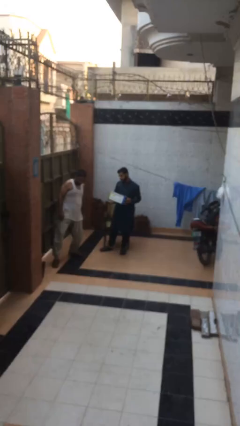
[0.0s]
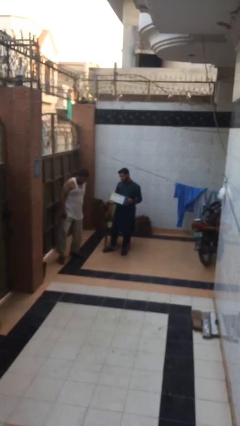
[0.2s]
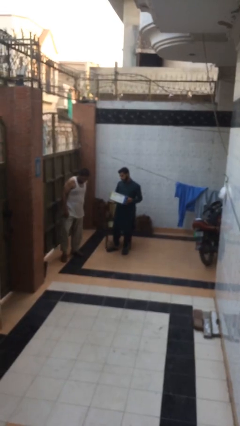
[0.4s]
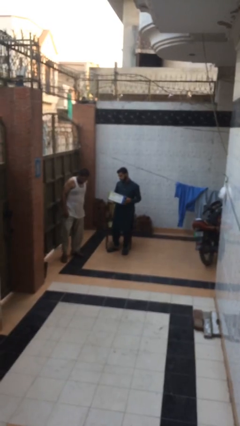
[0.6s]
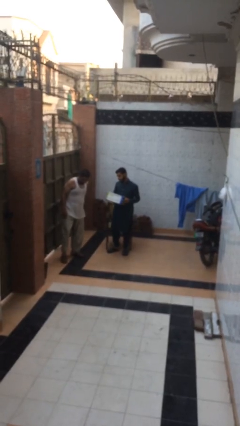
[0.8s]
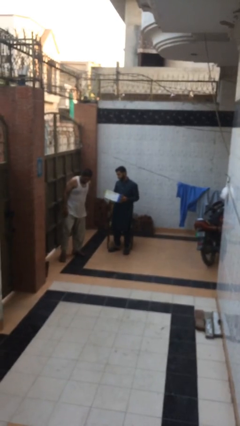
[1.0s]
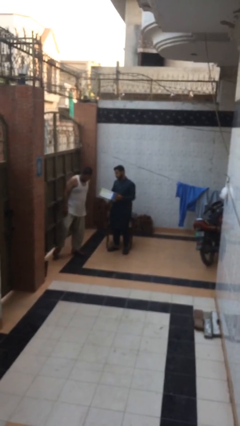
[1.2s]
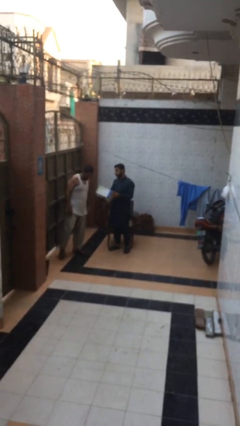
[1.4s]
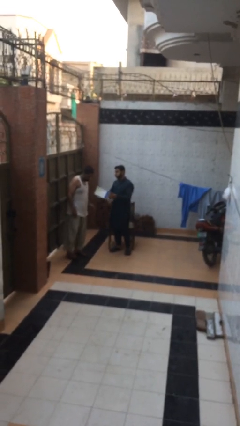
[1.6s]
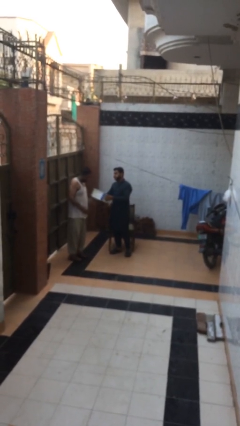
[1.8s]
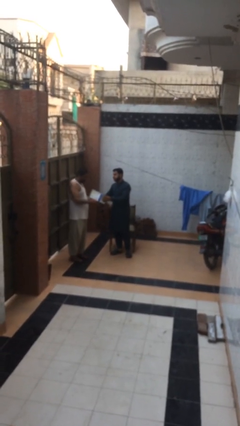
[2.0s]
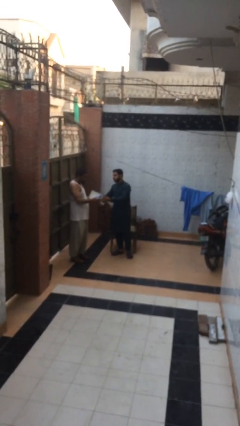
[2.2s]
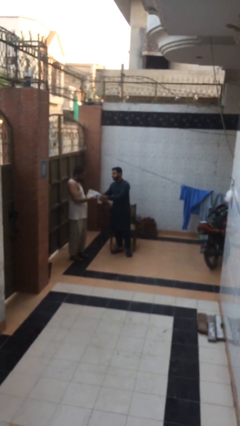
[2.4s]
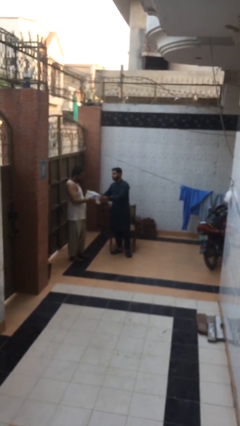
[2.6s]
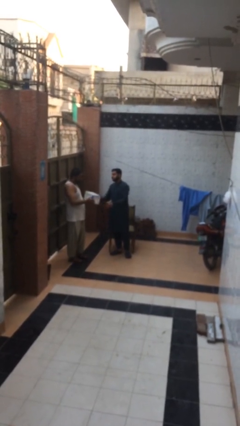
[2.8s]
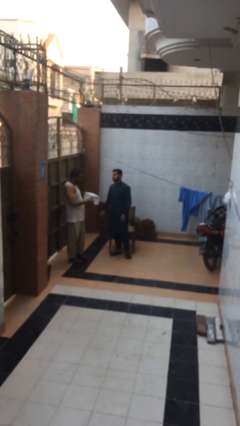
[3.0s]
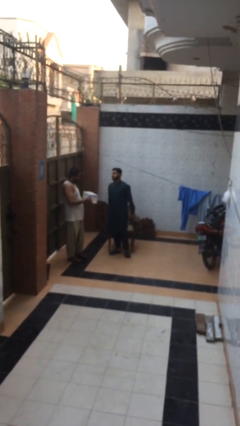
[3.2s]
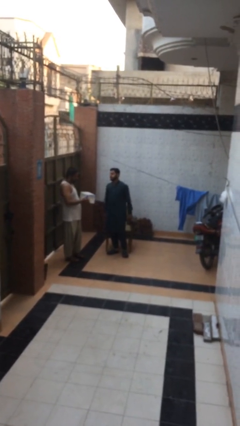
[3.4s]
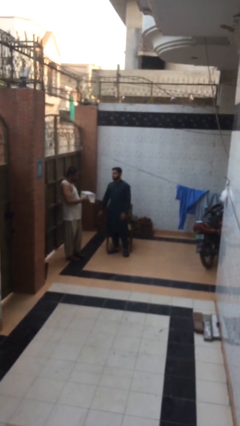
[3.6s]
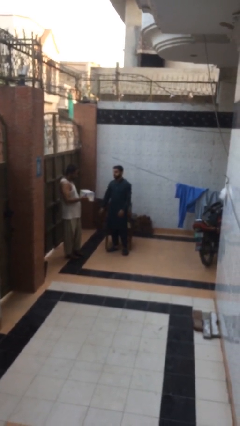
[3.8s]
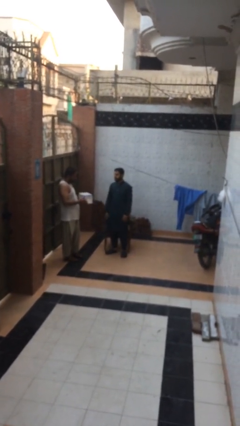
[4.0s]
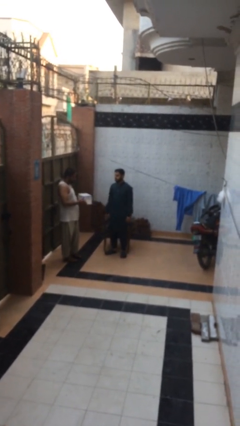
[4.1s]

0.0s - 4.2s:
person transfers object to person

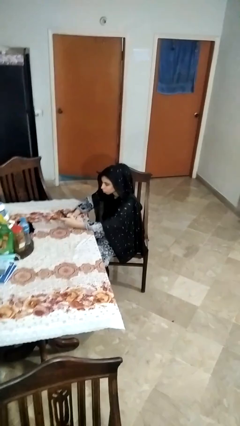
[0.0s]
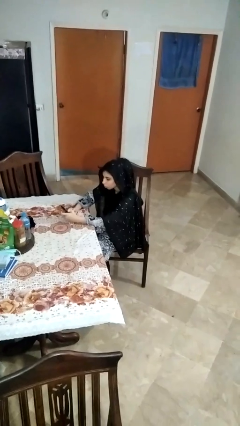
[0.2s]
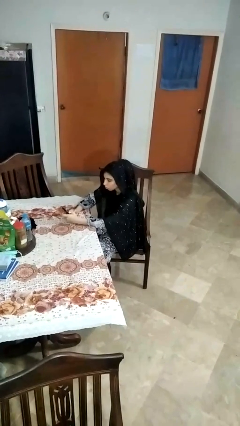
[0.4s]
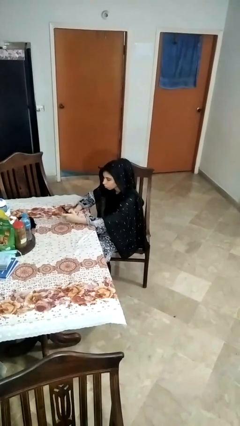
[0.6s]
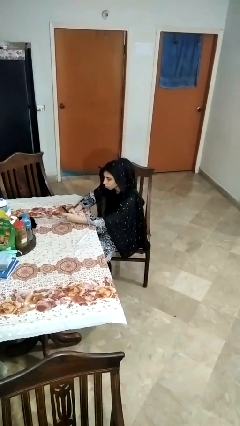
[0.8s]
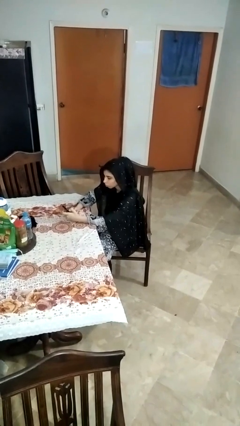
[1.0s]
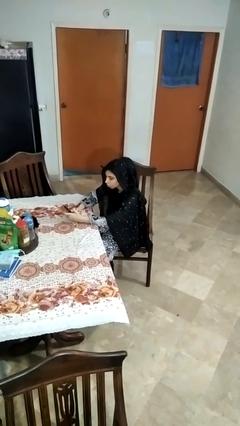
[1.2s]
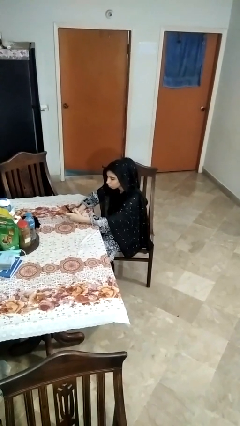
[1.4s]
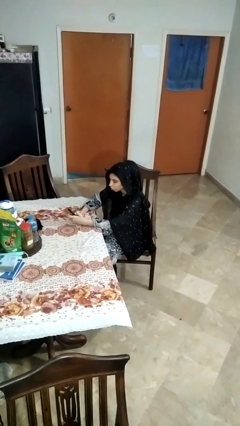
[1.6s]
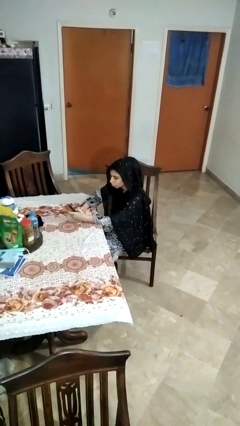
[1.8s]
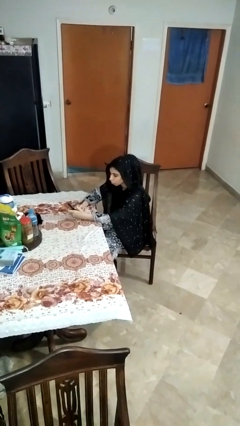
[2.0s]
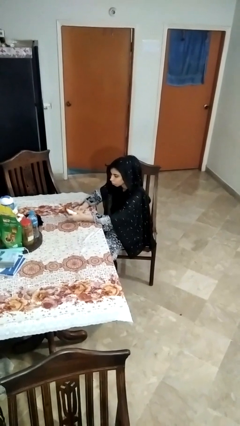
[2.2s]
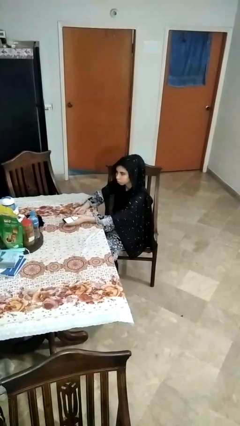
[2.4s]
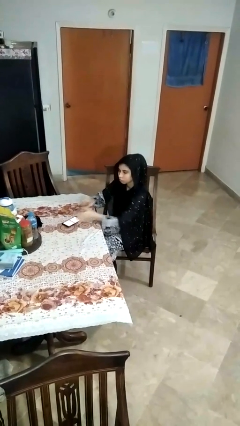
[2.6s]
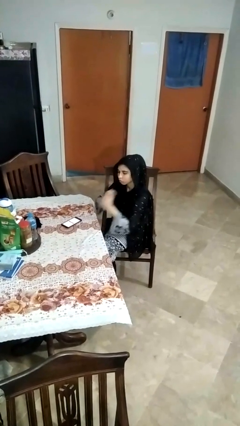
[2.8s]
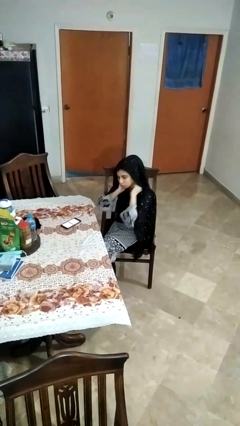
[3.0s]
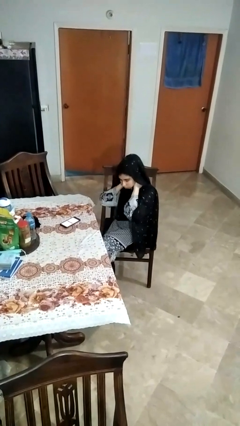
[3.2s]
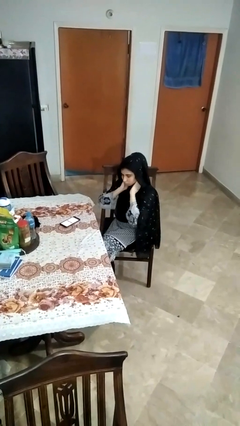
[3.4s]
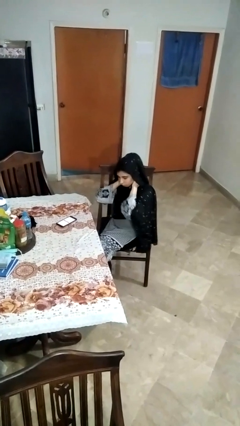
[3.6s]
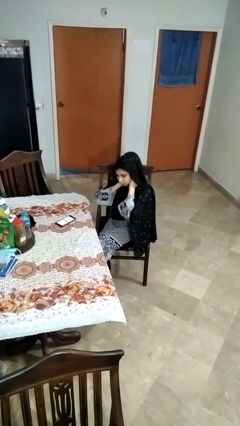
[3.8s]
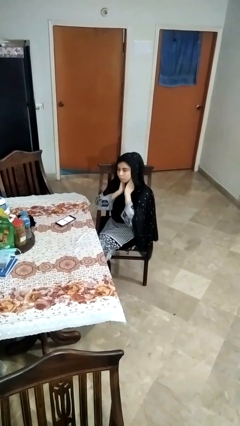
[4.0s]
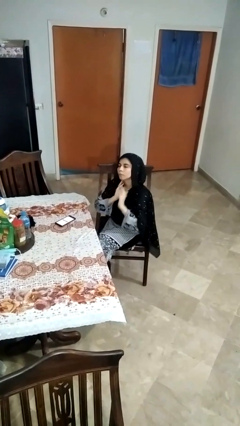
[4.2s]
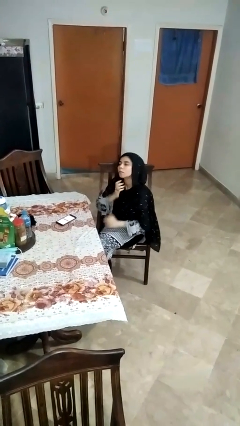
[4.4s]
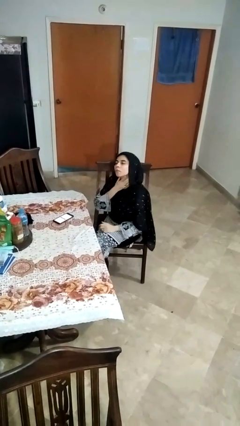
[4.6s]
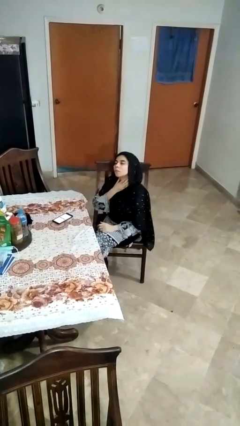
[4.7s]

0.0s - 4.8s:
person rubs neck

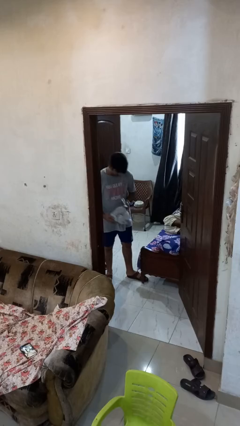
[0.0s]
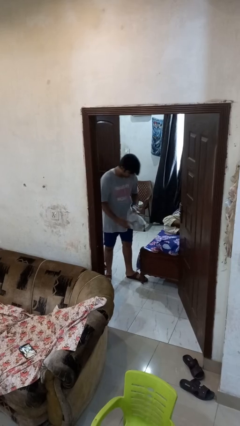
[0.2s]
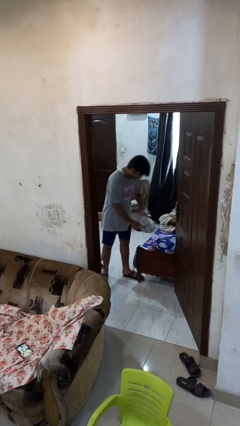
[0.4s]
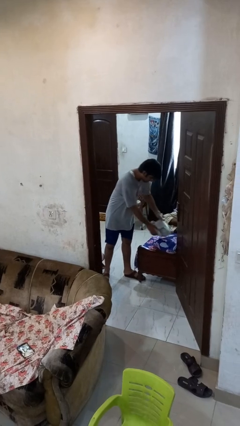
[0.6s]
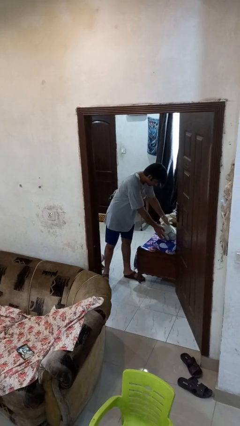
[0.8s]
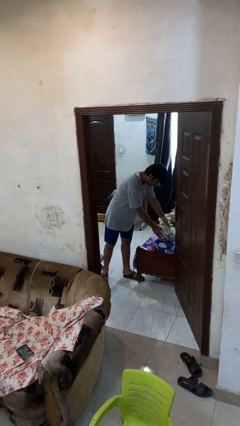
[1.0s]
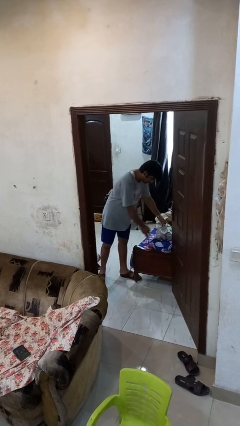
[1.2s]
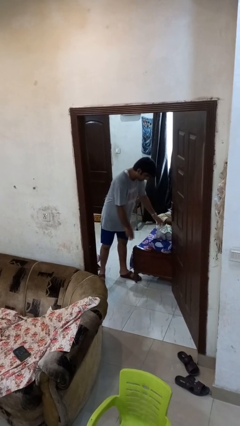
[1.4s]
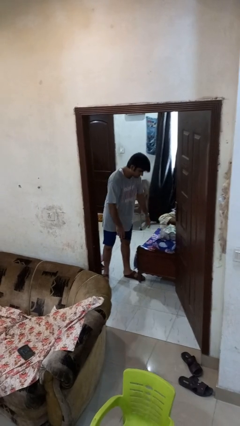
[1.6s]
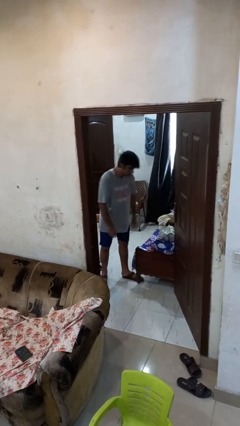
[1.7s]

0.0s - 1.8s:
person puts down object on bed

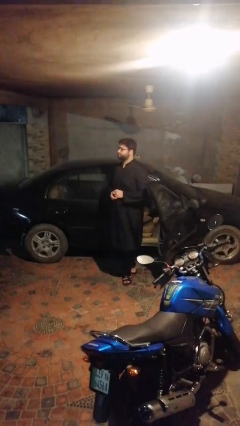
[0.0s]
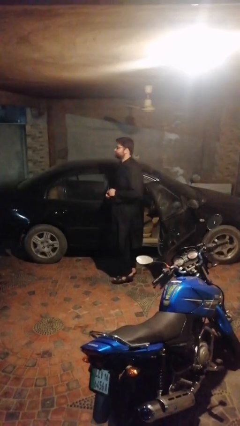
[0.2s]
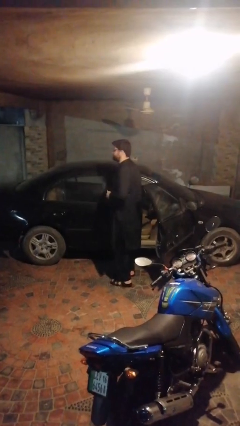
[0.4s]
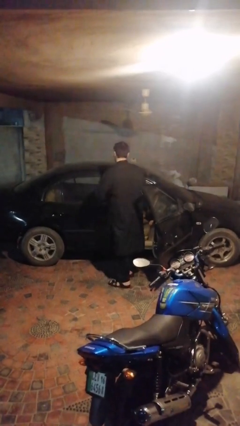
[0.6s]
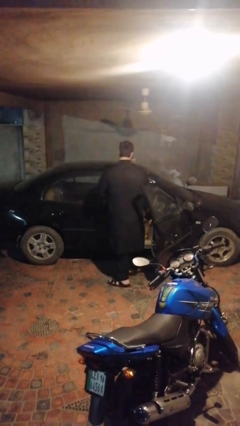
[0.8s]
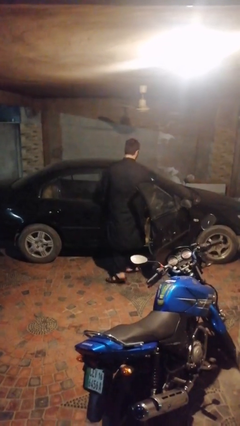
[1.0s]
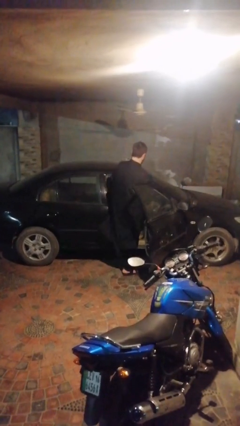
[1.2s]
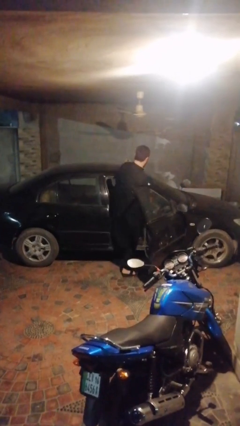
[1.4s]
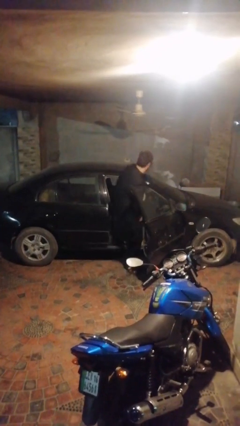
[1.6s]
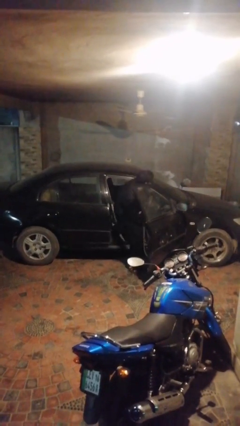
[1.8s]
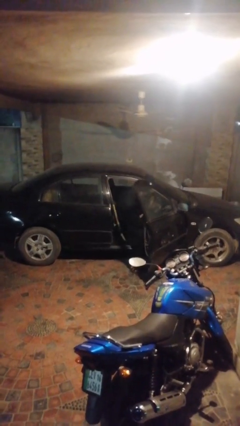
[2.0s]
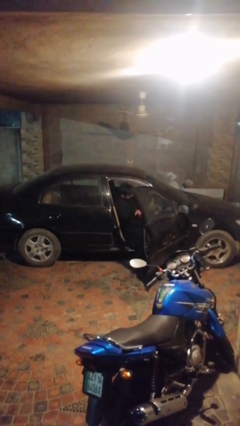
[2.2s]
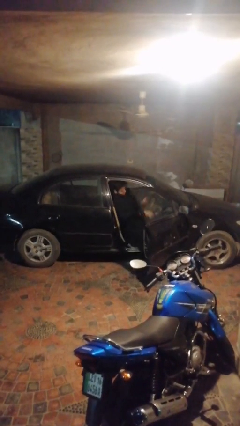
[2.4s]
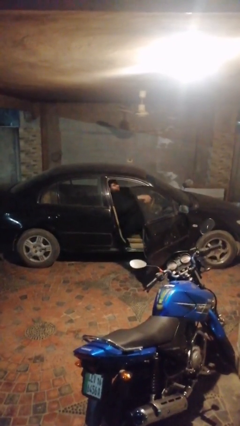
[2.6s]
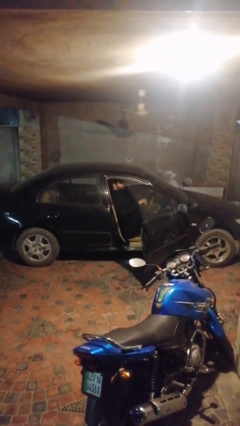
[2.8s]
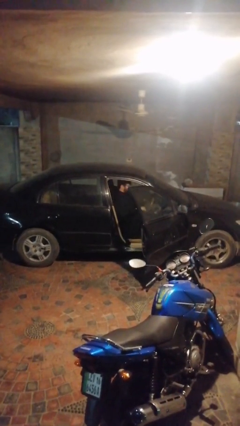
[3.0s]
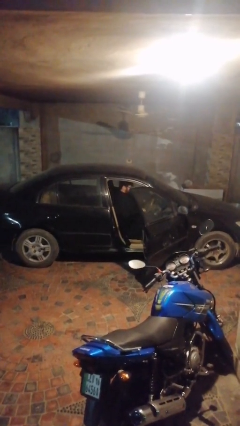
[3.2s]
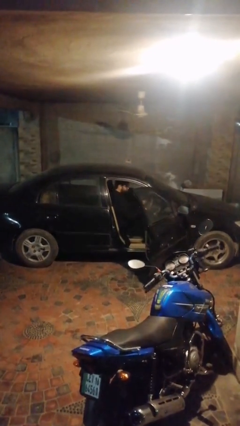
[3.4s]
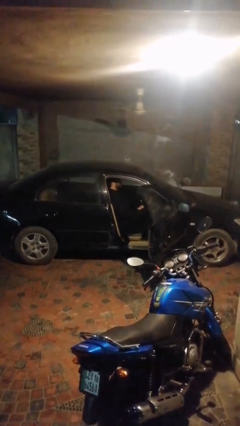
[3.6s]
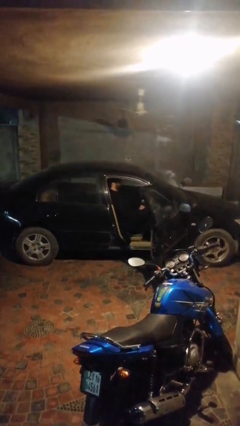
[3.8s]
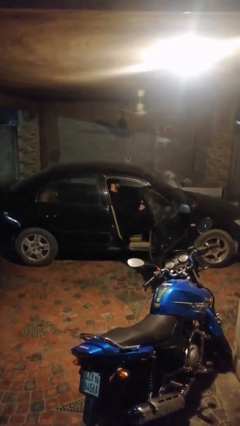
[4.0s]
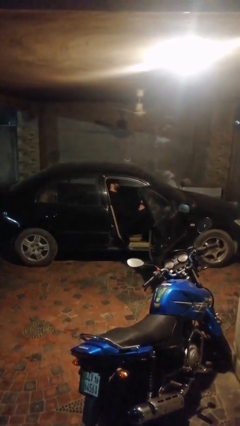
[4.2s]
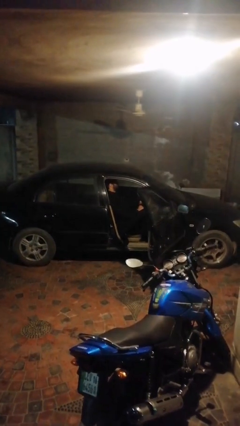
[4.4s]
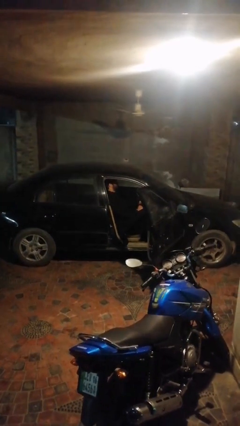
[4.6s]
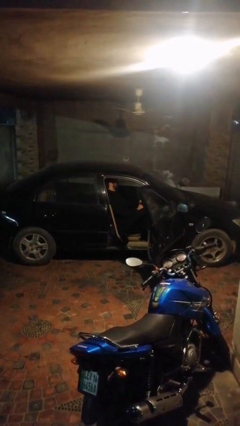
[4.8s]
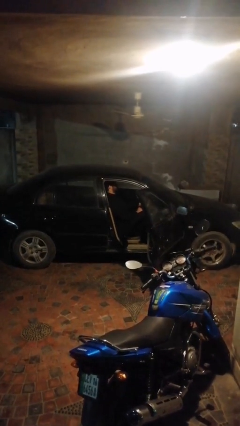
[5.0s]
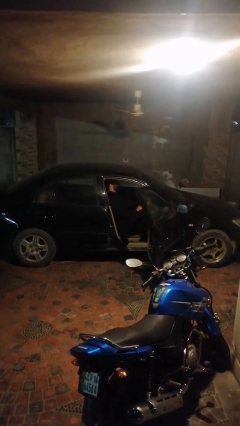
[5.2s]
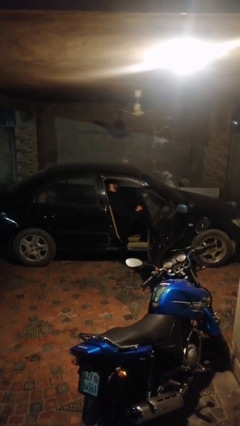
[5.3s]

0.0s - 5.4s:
person enters car

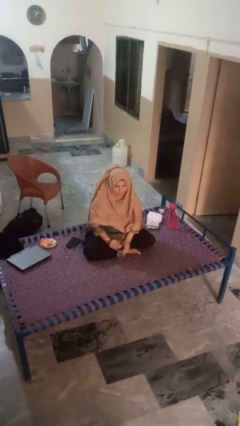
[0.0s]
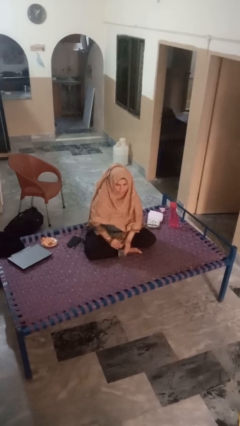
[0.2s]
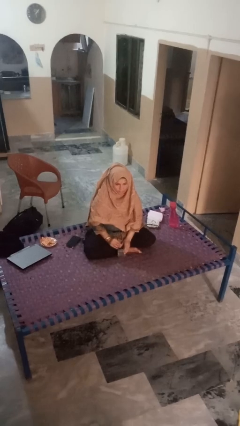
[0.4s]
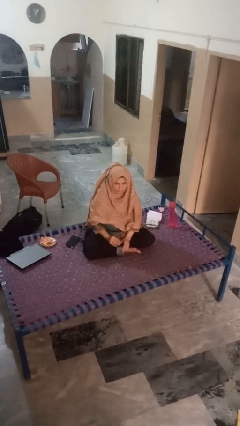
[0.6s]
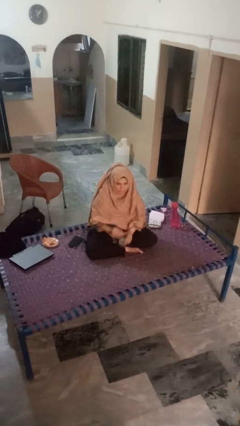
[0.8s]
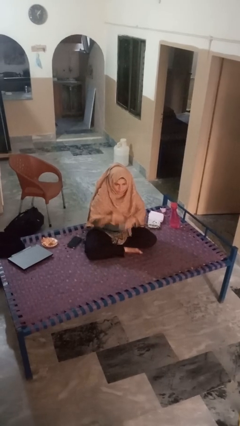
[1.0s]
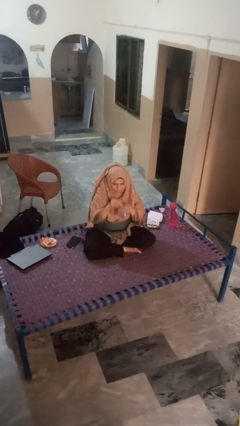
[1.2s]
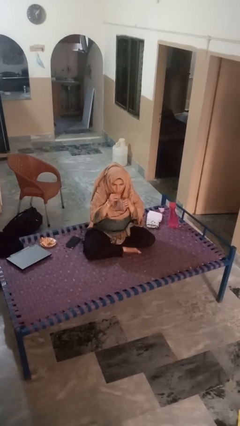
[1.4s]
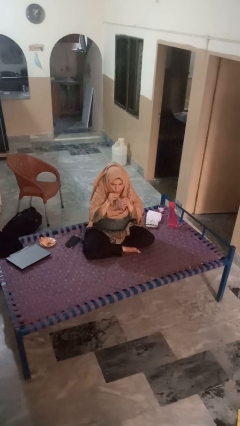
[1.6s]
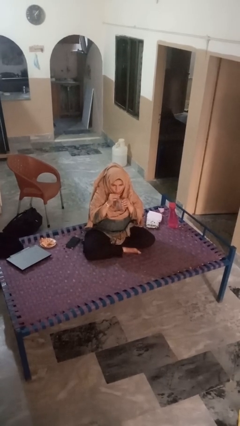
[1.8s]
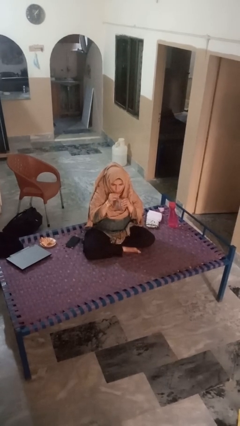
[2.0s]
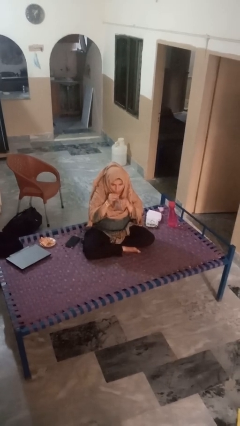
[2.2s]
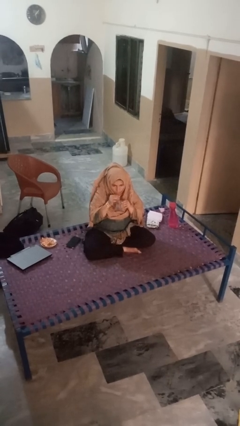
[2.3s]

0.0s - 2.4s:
person drinks from straw
